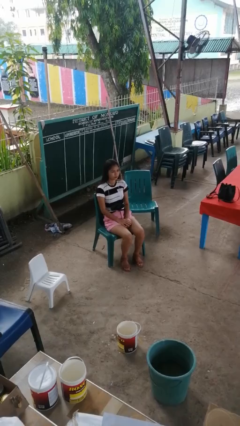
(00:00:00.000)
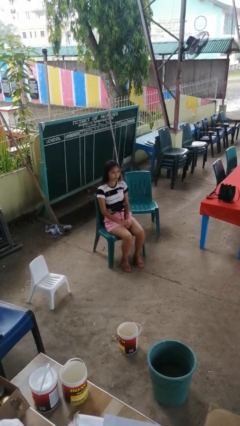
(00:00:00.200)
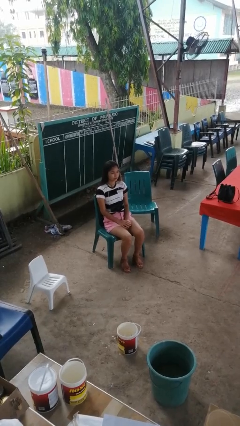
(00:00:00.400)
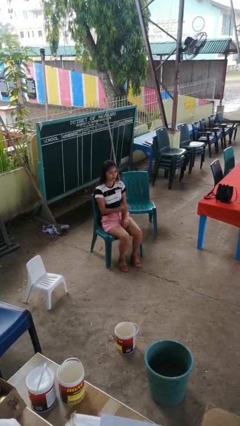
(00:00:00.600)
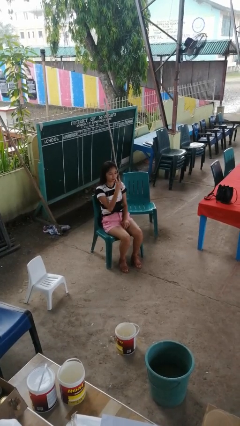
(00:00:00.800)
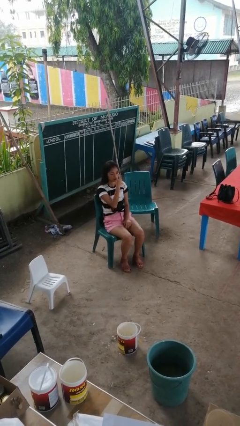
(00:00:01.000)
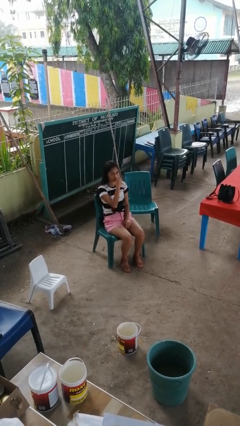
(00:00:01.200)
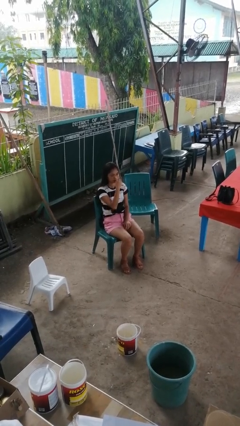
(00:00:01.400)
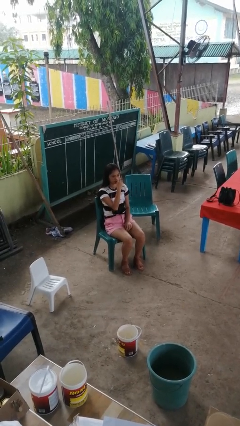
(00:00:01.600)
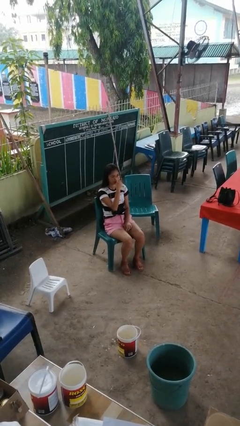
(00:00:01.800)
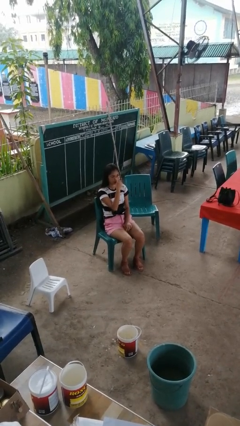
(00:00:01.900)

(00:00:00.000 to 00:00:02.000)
person gestures watch closely

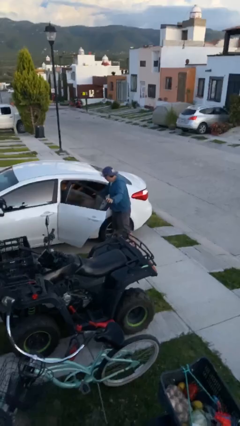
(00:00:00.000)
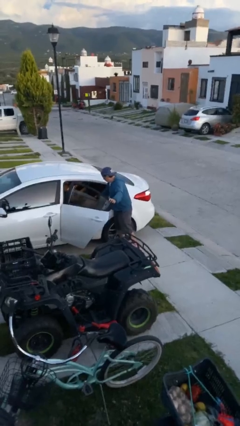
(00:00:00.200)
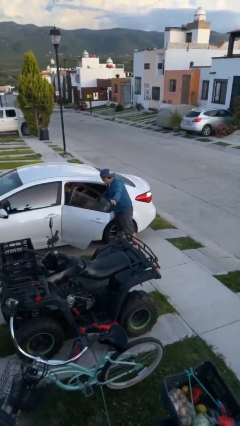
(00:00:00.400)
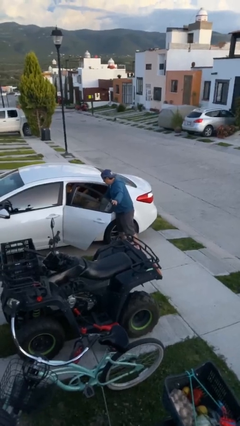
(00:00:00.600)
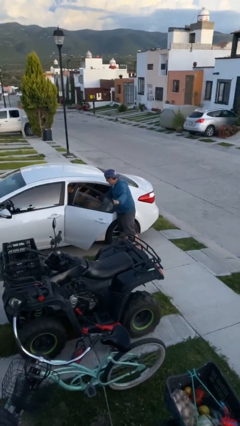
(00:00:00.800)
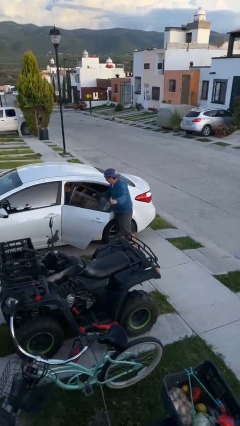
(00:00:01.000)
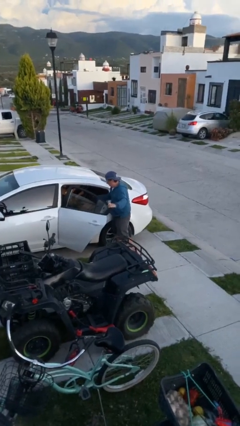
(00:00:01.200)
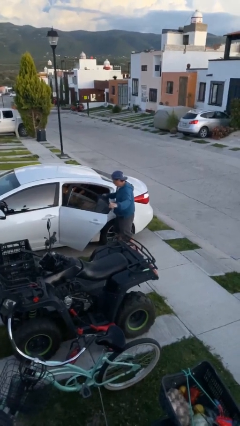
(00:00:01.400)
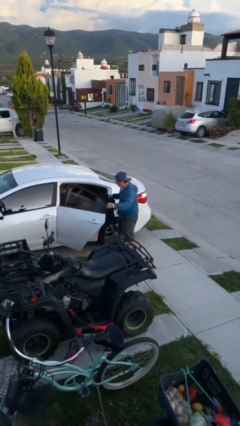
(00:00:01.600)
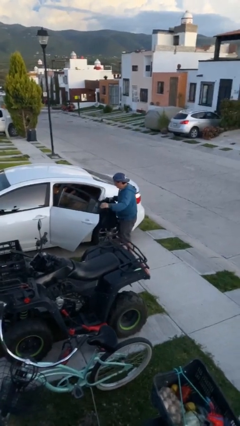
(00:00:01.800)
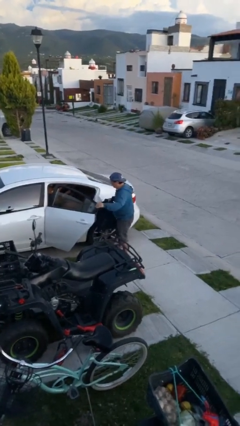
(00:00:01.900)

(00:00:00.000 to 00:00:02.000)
person unloads car

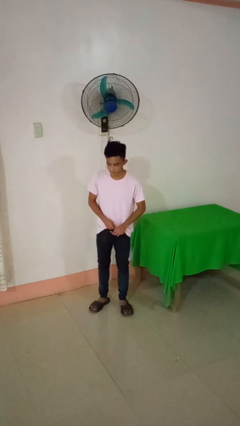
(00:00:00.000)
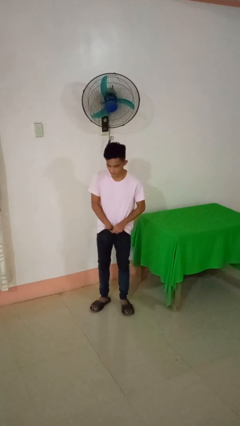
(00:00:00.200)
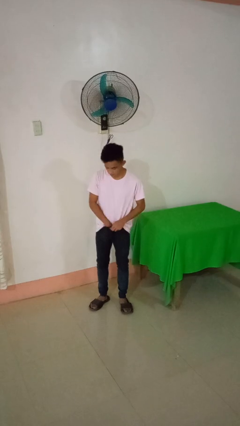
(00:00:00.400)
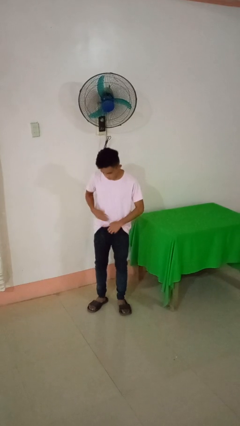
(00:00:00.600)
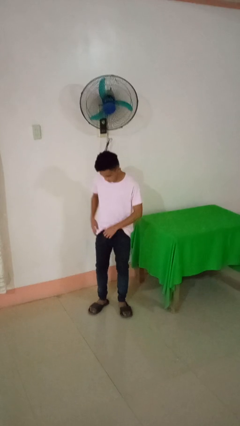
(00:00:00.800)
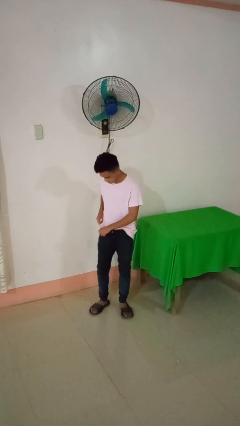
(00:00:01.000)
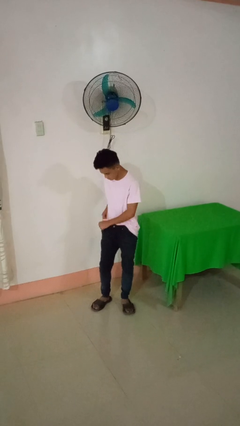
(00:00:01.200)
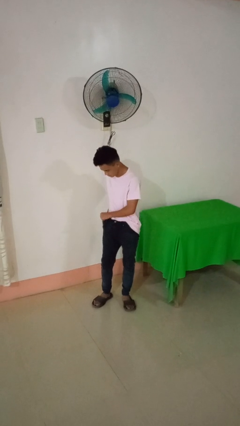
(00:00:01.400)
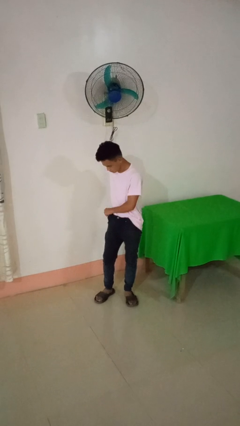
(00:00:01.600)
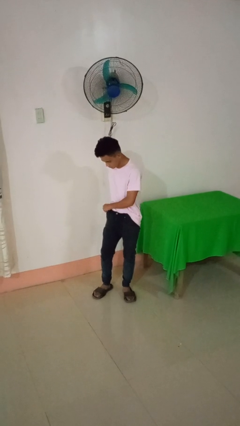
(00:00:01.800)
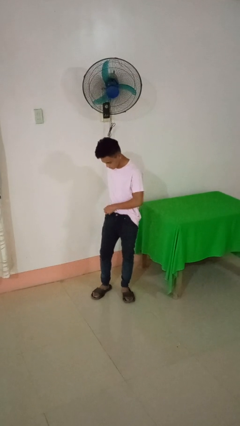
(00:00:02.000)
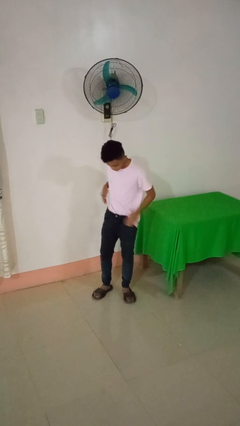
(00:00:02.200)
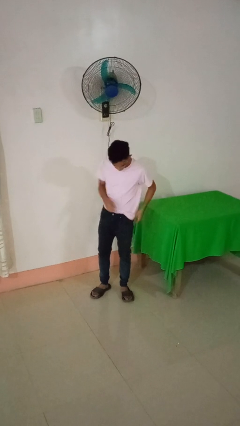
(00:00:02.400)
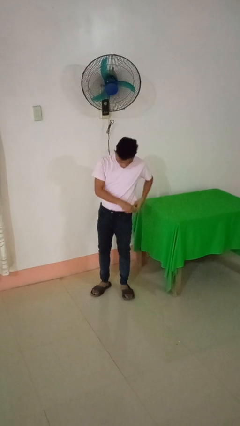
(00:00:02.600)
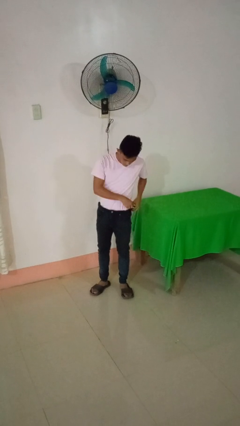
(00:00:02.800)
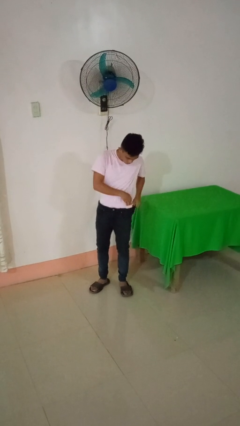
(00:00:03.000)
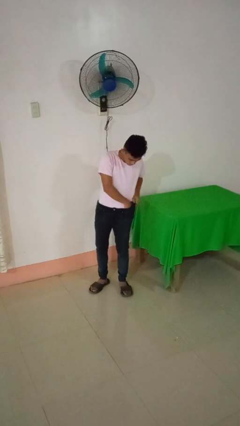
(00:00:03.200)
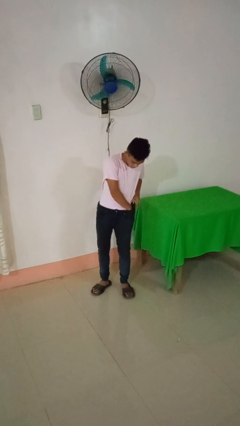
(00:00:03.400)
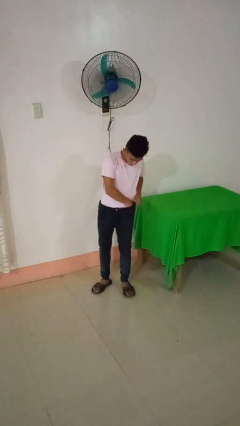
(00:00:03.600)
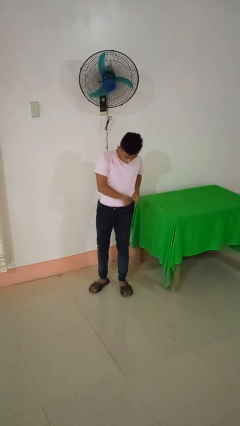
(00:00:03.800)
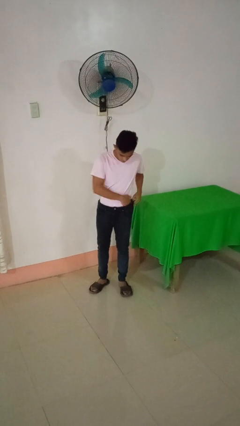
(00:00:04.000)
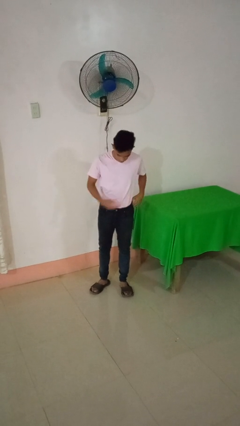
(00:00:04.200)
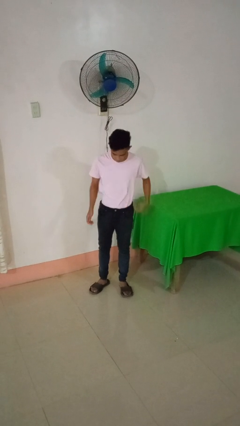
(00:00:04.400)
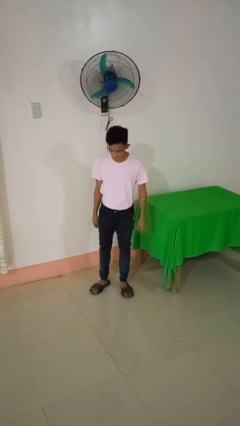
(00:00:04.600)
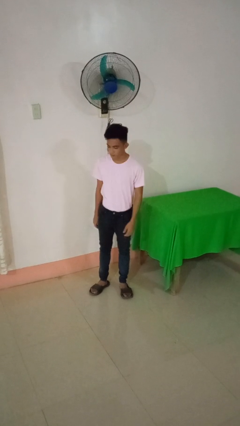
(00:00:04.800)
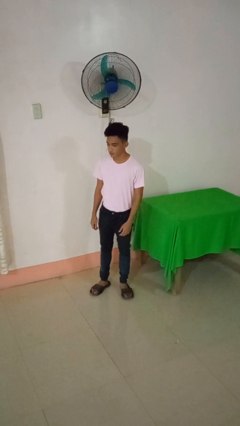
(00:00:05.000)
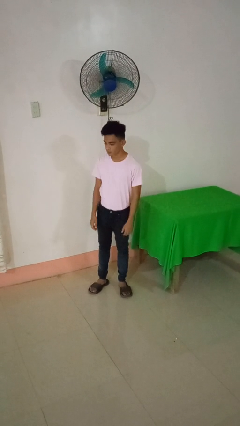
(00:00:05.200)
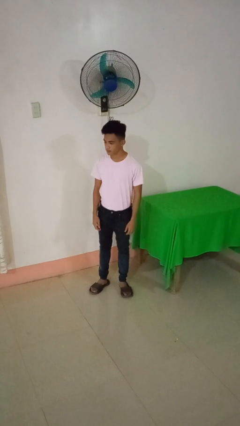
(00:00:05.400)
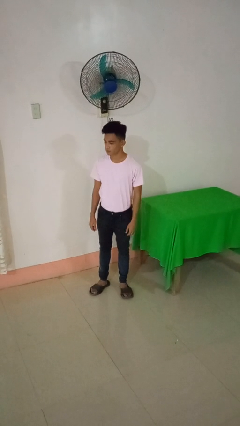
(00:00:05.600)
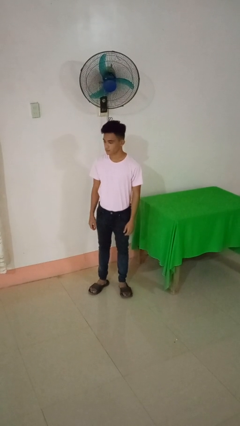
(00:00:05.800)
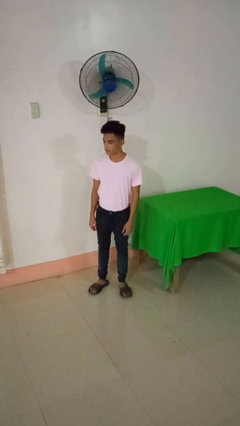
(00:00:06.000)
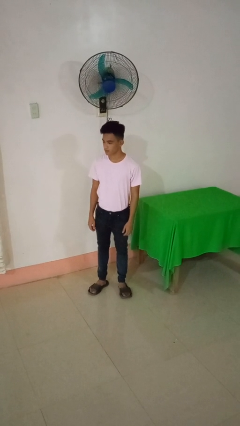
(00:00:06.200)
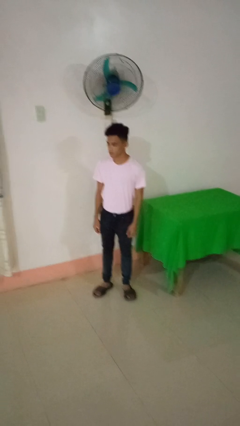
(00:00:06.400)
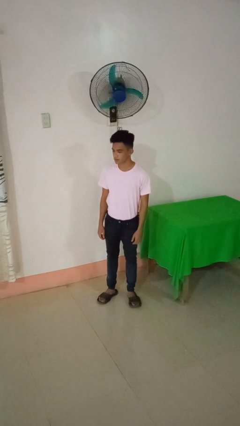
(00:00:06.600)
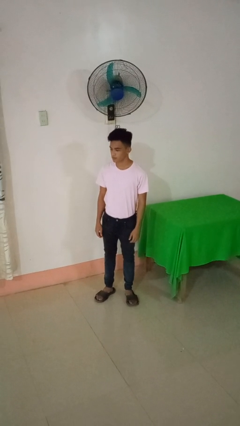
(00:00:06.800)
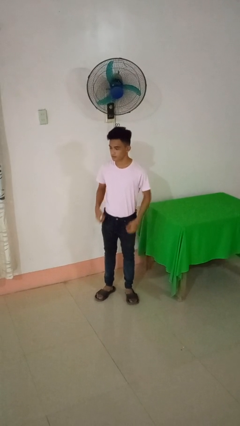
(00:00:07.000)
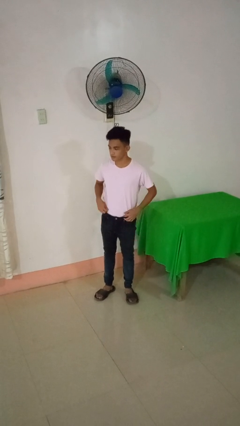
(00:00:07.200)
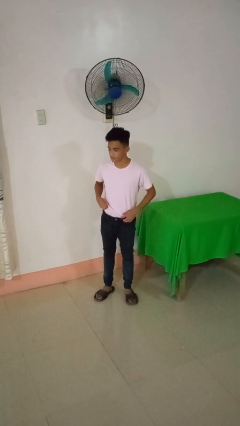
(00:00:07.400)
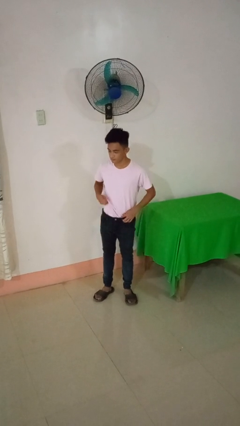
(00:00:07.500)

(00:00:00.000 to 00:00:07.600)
person tucks in shirt

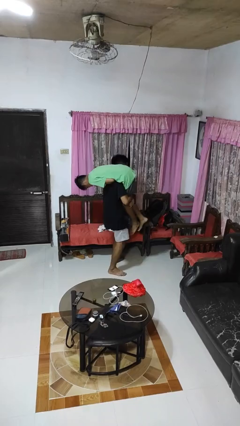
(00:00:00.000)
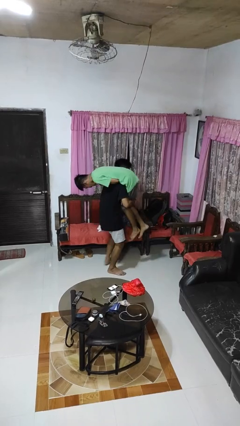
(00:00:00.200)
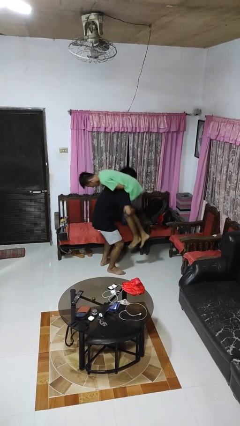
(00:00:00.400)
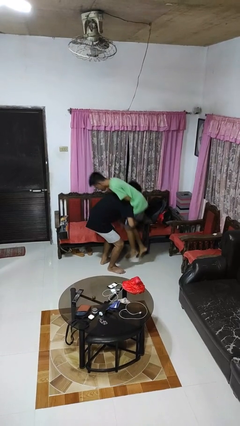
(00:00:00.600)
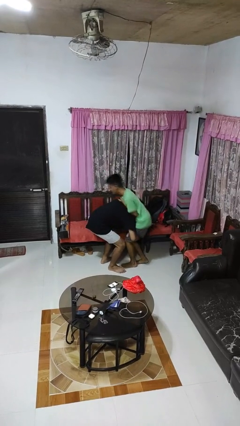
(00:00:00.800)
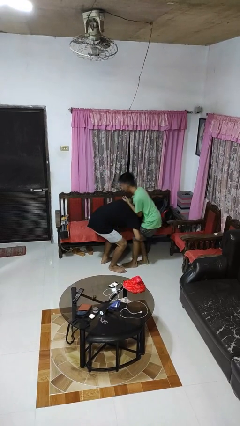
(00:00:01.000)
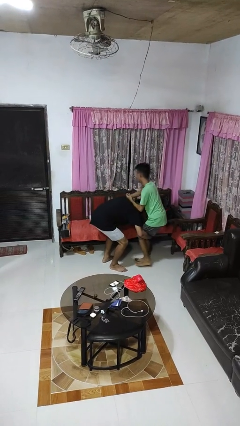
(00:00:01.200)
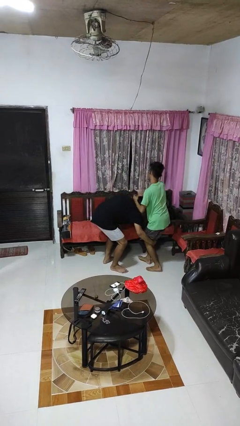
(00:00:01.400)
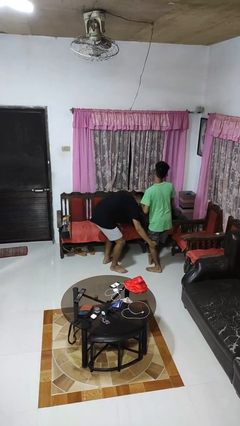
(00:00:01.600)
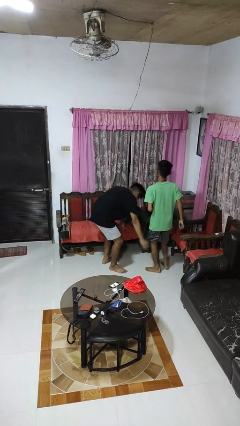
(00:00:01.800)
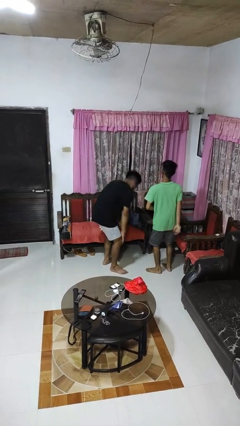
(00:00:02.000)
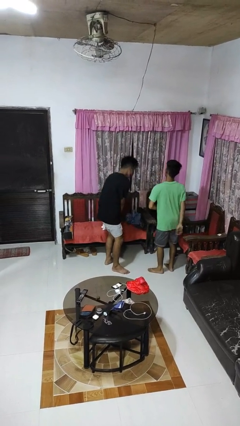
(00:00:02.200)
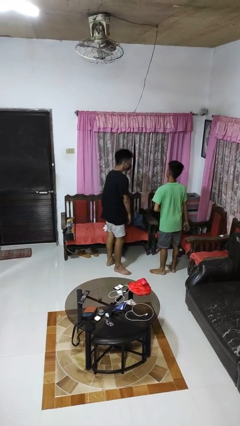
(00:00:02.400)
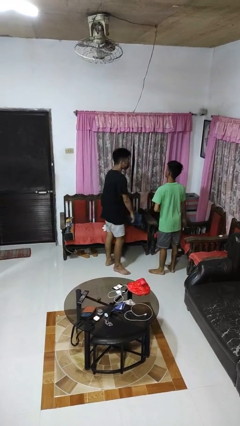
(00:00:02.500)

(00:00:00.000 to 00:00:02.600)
person puts down person

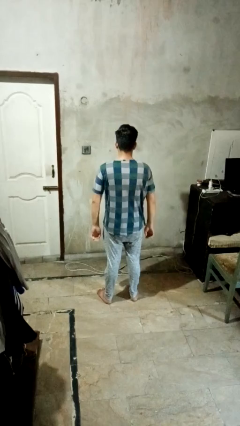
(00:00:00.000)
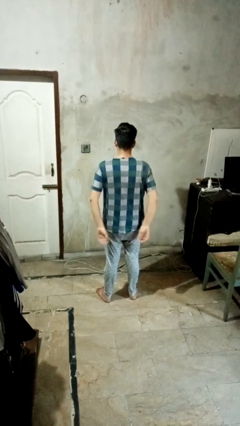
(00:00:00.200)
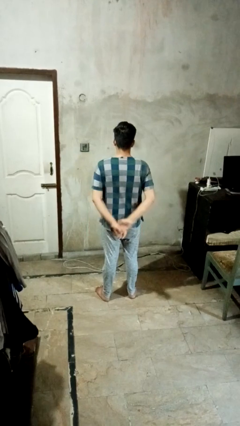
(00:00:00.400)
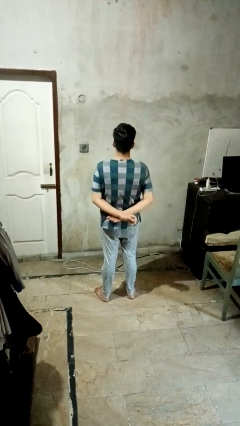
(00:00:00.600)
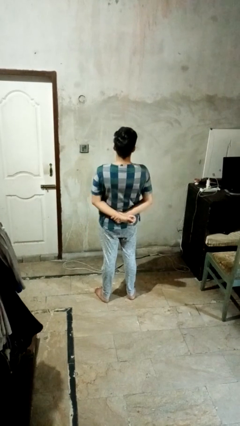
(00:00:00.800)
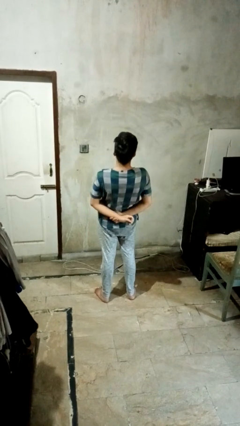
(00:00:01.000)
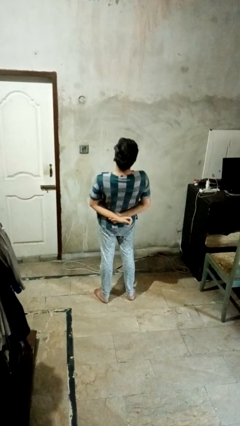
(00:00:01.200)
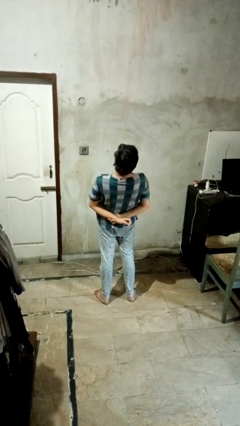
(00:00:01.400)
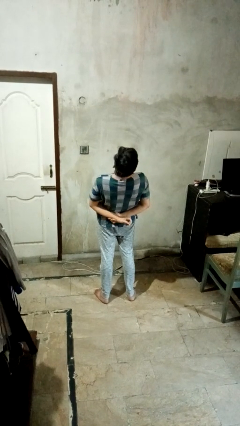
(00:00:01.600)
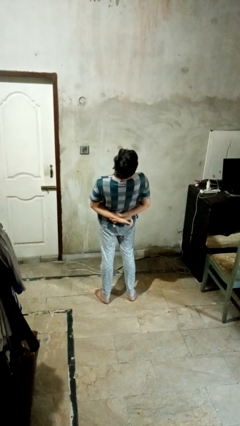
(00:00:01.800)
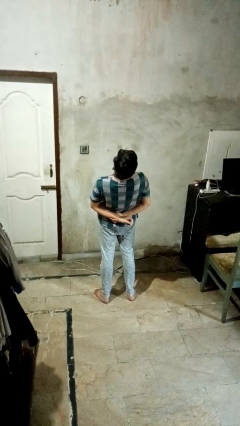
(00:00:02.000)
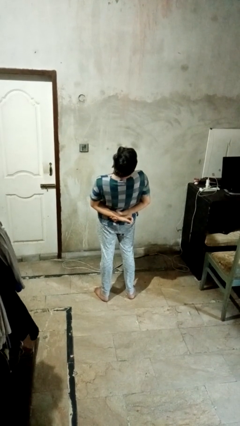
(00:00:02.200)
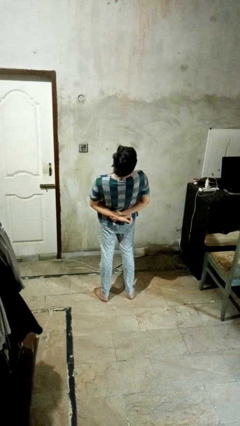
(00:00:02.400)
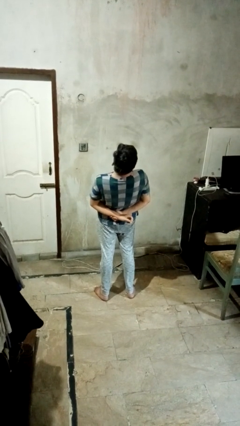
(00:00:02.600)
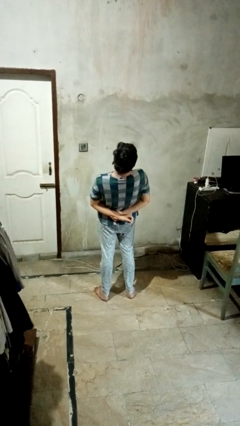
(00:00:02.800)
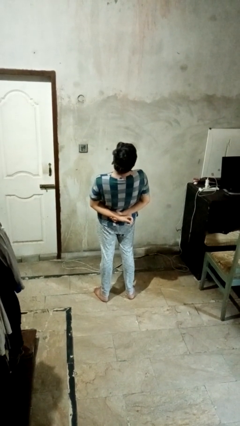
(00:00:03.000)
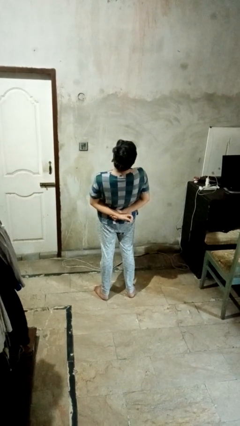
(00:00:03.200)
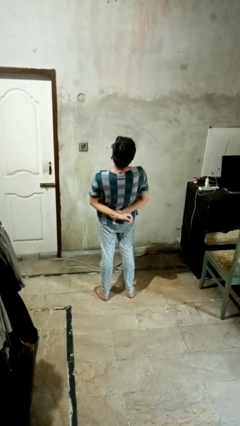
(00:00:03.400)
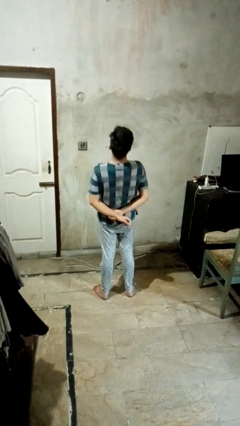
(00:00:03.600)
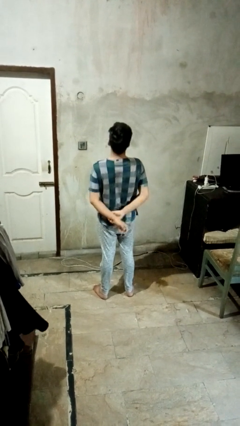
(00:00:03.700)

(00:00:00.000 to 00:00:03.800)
person stretches back
